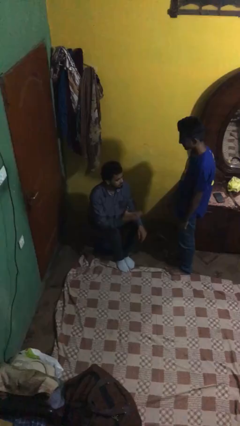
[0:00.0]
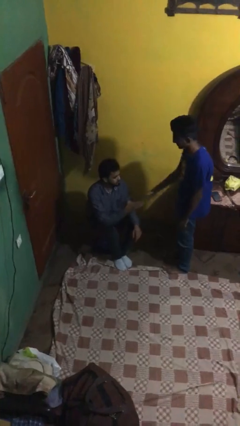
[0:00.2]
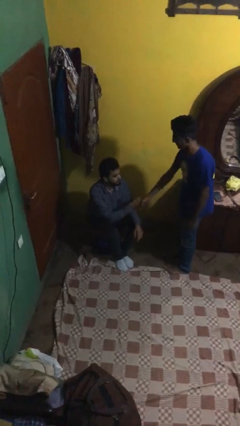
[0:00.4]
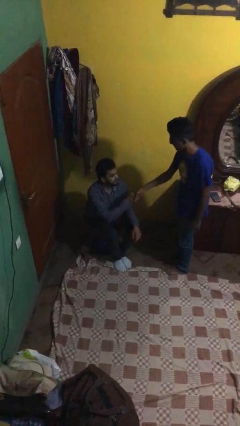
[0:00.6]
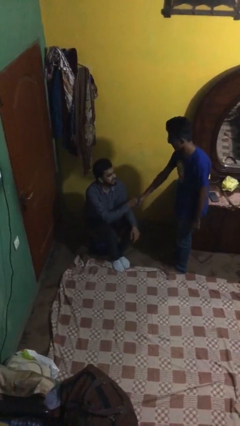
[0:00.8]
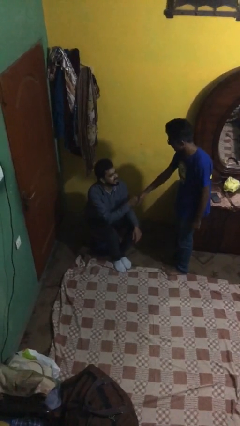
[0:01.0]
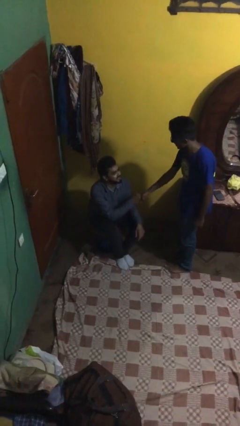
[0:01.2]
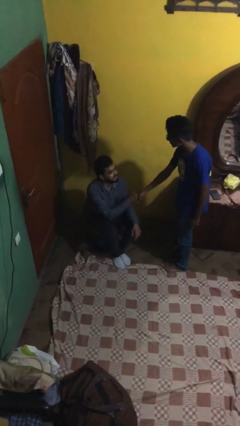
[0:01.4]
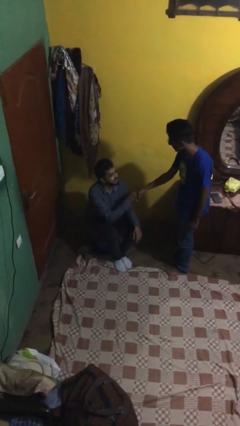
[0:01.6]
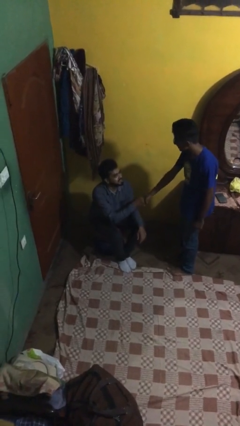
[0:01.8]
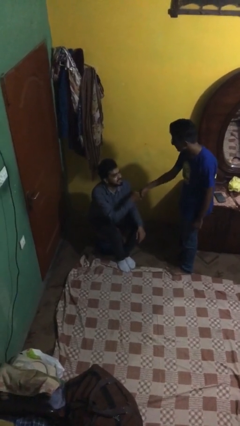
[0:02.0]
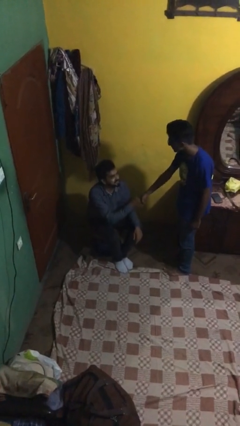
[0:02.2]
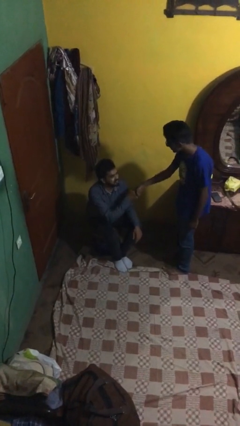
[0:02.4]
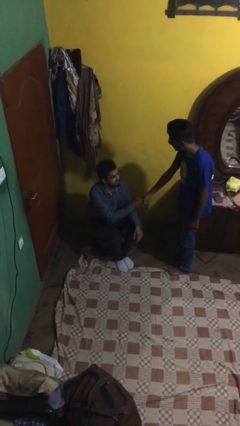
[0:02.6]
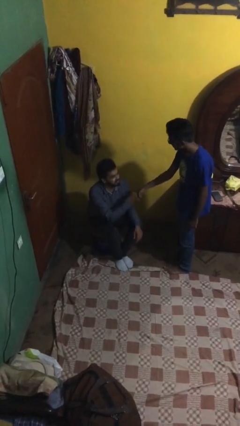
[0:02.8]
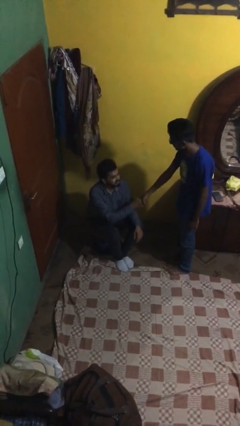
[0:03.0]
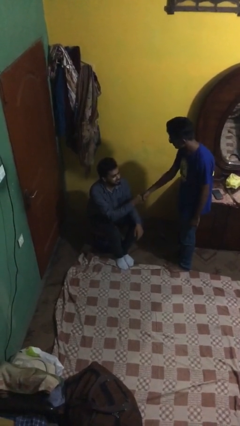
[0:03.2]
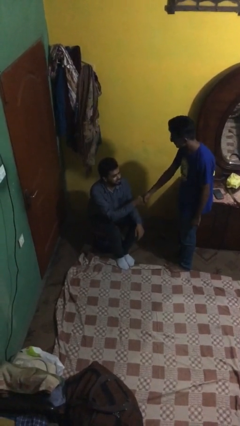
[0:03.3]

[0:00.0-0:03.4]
person shakes hand

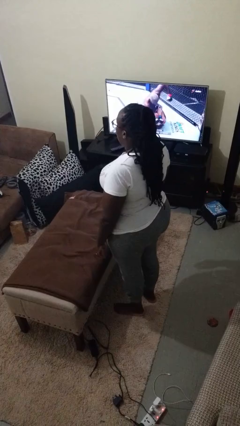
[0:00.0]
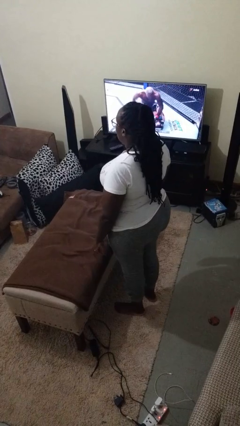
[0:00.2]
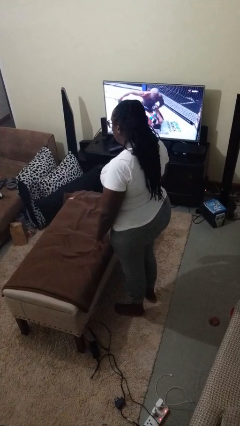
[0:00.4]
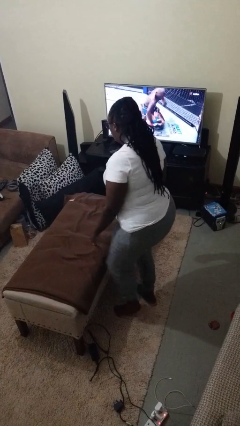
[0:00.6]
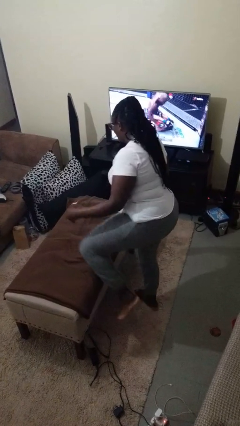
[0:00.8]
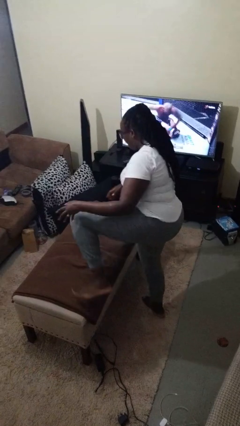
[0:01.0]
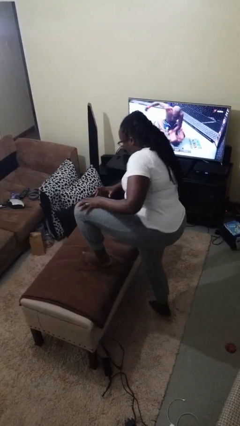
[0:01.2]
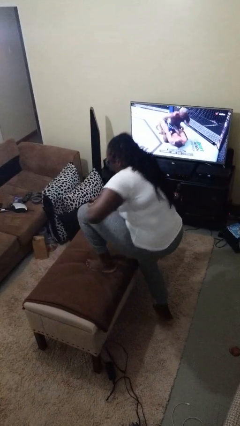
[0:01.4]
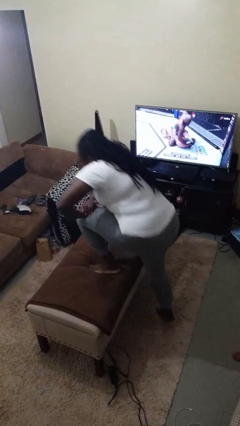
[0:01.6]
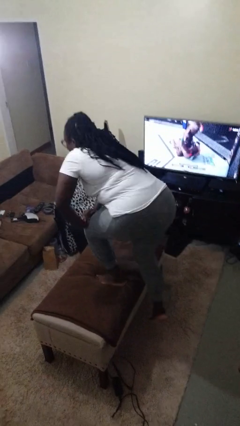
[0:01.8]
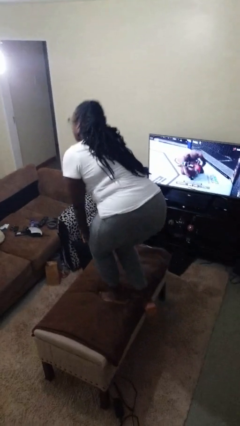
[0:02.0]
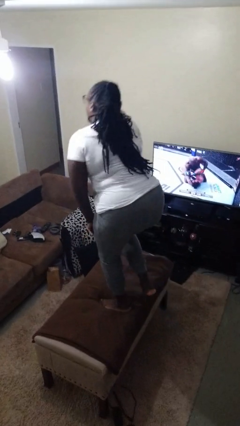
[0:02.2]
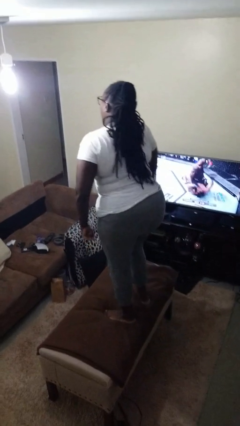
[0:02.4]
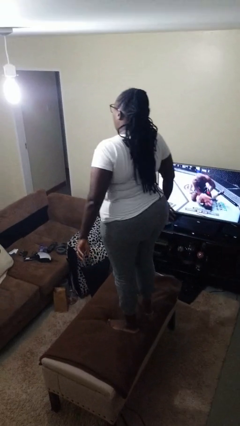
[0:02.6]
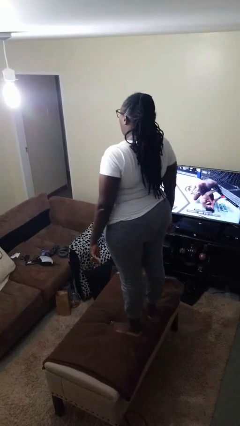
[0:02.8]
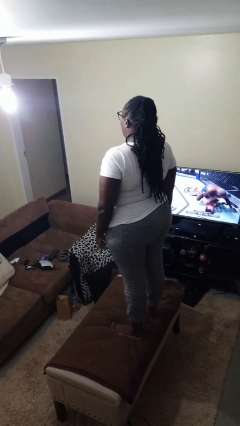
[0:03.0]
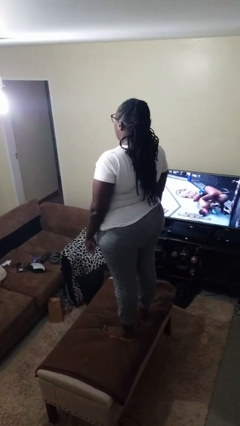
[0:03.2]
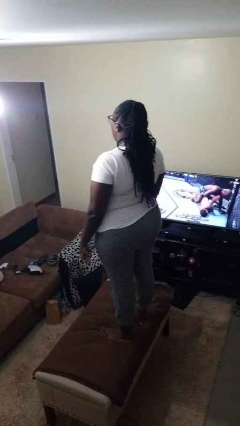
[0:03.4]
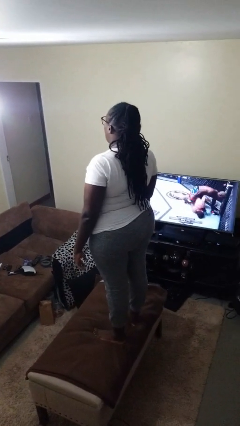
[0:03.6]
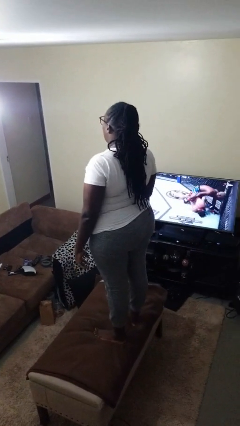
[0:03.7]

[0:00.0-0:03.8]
person climbs on table

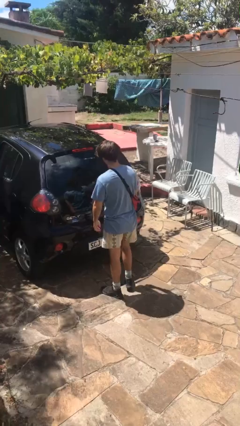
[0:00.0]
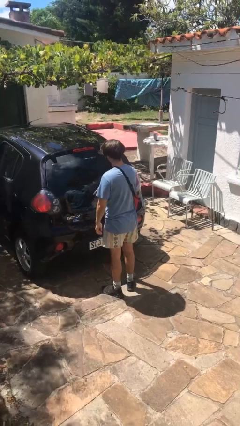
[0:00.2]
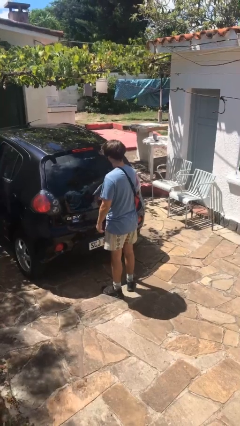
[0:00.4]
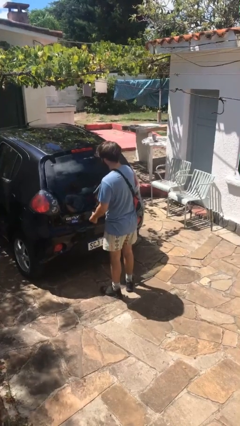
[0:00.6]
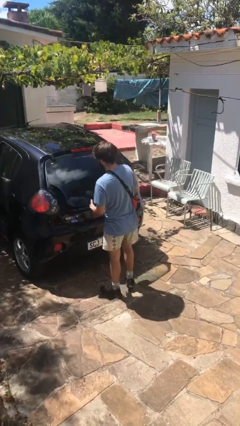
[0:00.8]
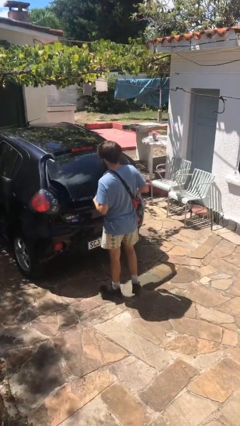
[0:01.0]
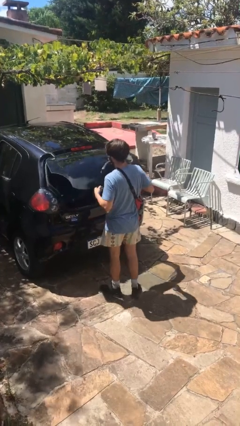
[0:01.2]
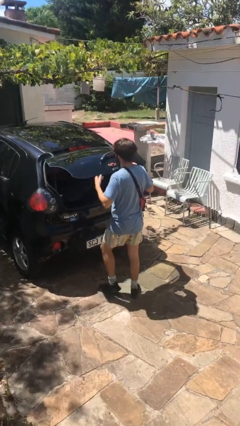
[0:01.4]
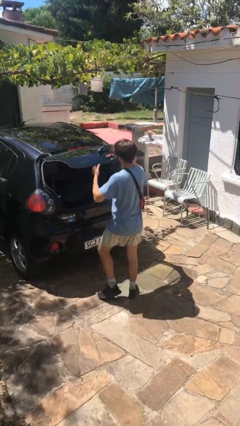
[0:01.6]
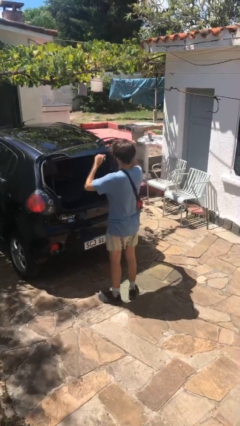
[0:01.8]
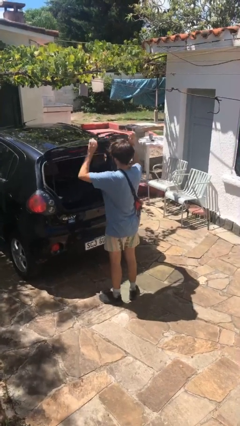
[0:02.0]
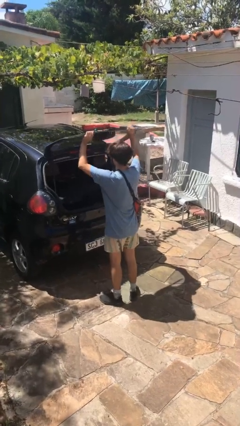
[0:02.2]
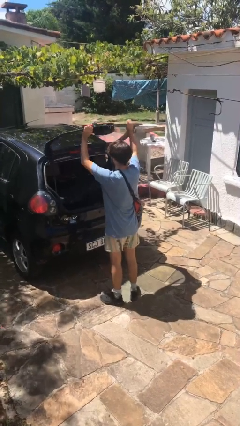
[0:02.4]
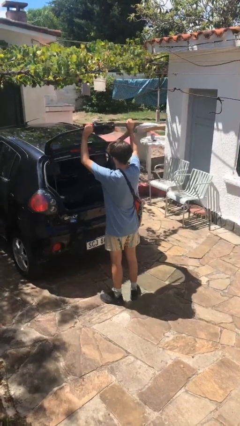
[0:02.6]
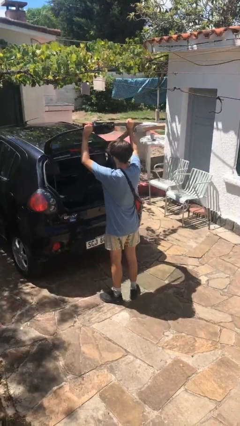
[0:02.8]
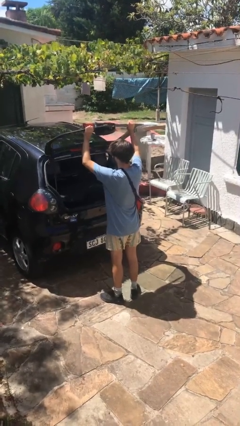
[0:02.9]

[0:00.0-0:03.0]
person opens car trunk

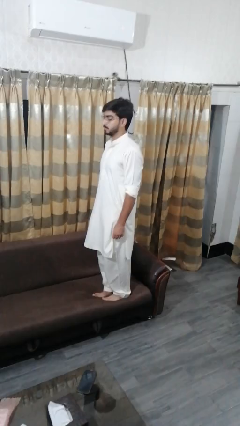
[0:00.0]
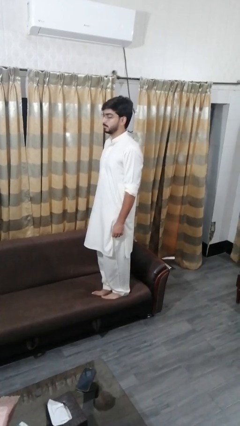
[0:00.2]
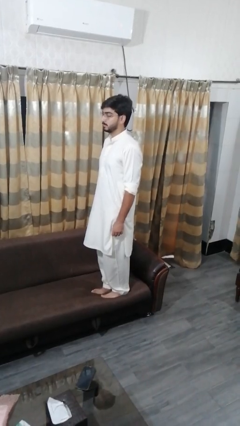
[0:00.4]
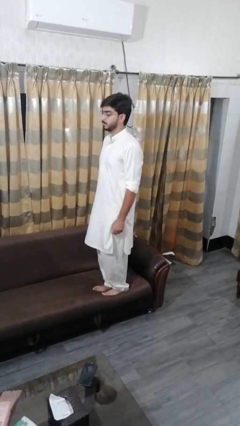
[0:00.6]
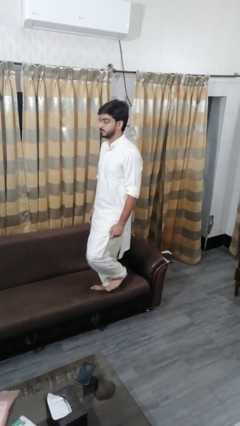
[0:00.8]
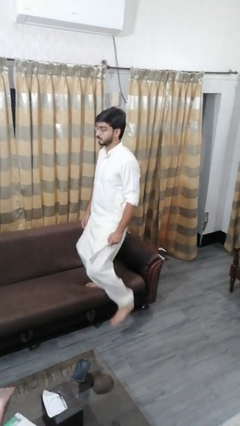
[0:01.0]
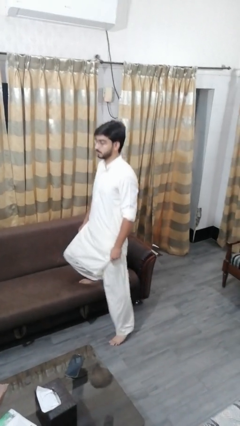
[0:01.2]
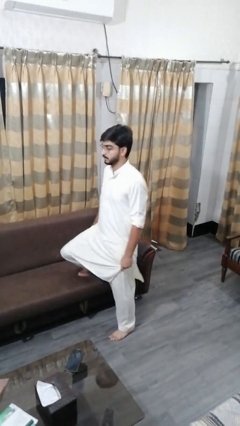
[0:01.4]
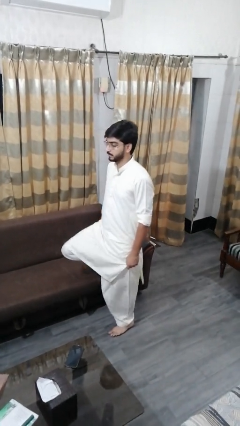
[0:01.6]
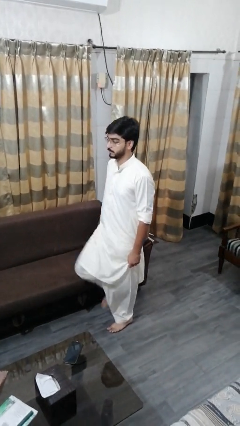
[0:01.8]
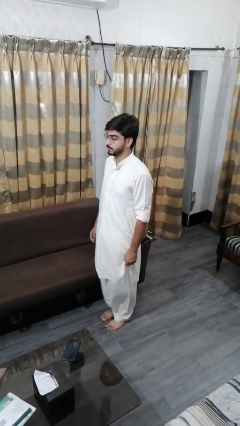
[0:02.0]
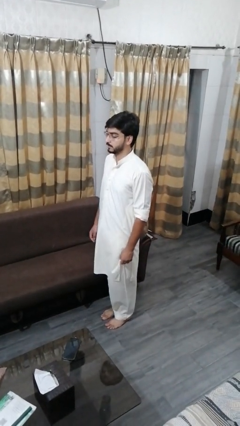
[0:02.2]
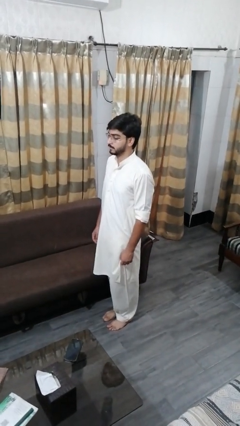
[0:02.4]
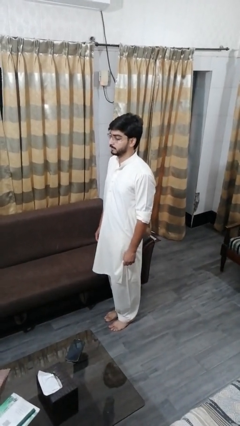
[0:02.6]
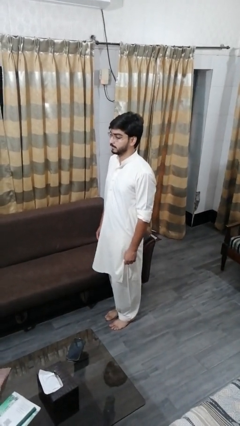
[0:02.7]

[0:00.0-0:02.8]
person climbs off couch

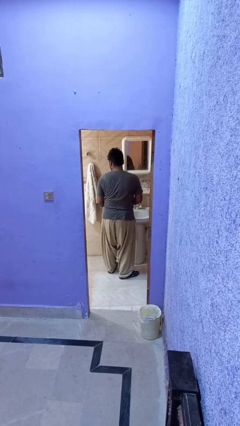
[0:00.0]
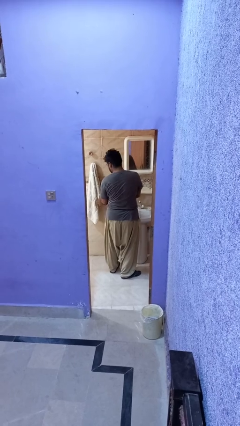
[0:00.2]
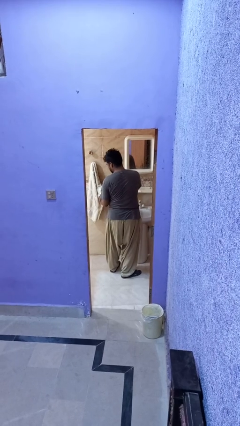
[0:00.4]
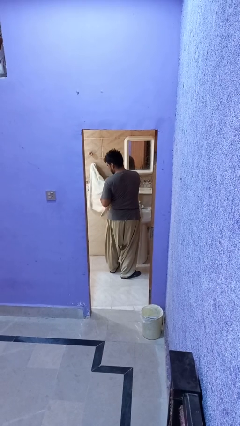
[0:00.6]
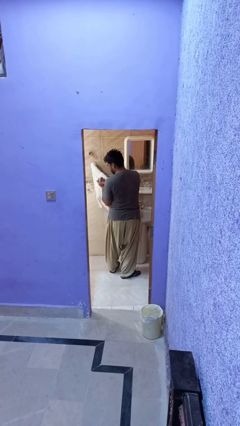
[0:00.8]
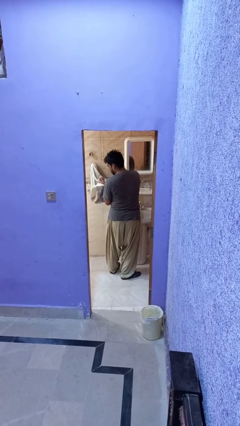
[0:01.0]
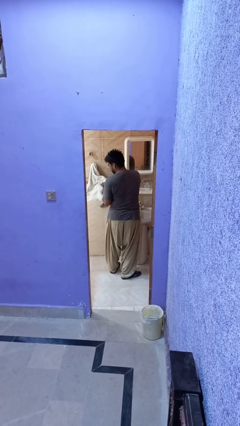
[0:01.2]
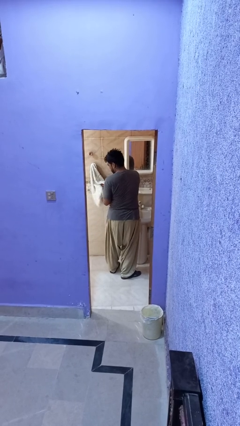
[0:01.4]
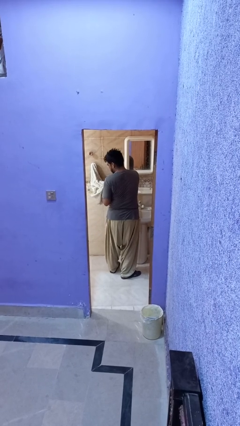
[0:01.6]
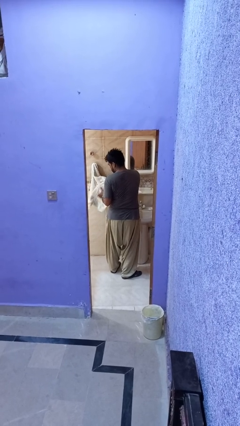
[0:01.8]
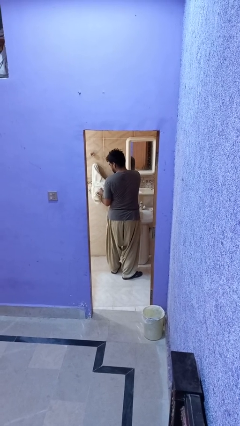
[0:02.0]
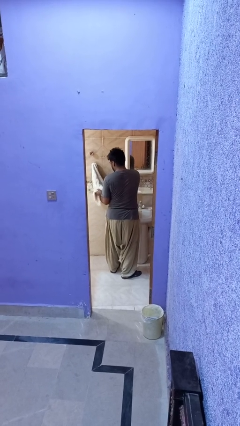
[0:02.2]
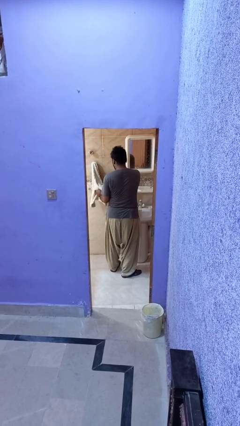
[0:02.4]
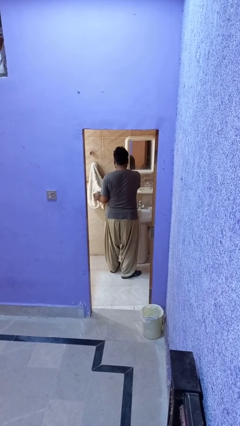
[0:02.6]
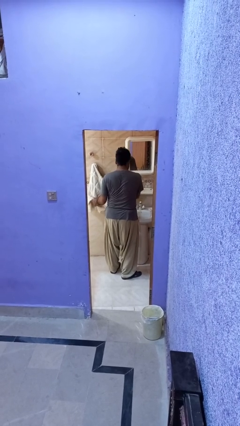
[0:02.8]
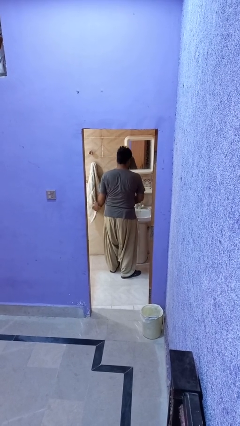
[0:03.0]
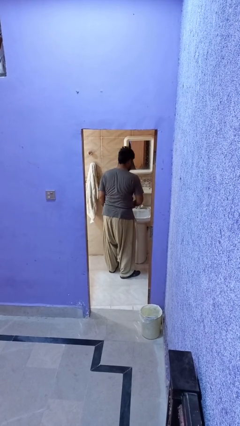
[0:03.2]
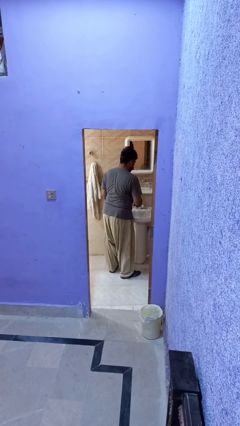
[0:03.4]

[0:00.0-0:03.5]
person dries hands with towel

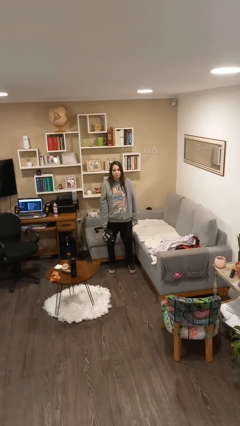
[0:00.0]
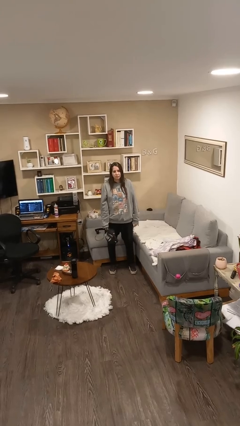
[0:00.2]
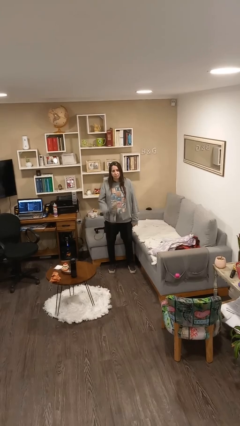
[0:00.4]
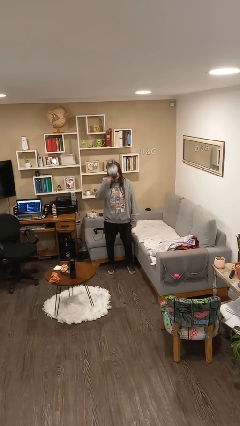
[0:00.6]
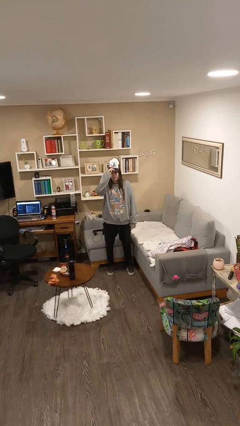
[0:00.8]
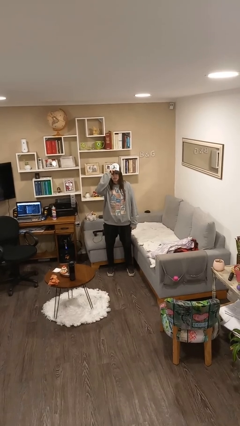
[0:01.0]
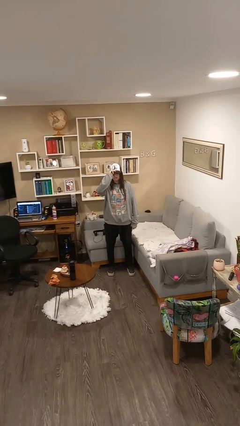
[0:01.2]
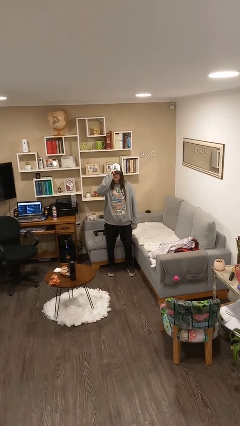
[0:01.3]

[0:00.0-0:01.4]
person puts on hat
